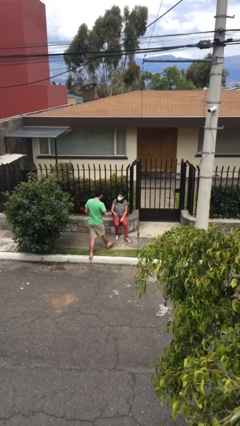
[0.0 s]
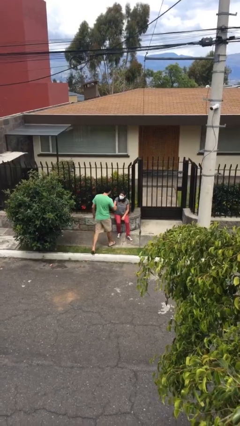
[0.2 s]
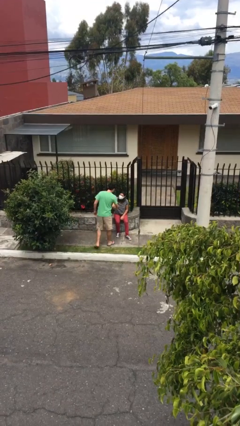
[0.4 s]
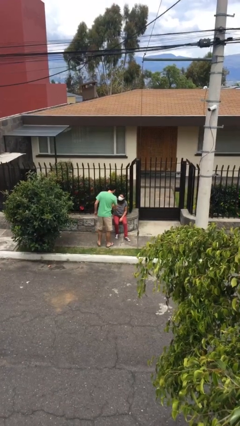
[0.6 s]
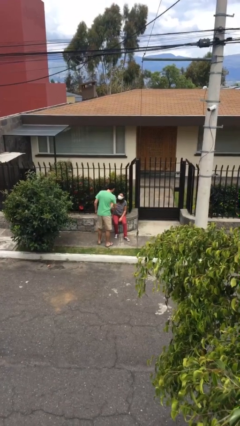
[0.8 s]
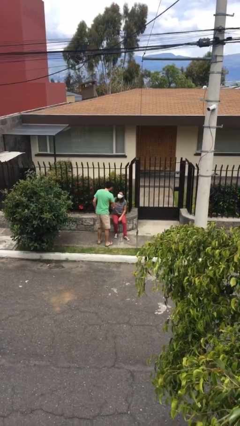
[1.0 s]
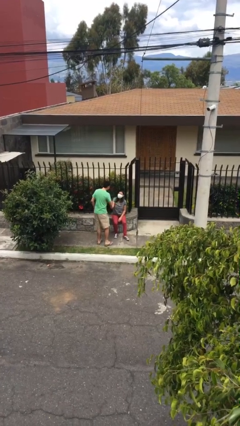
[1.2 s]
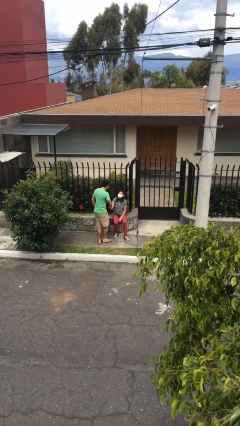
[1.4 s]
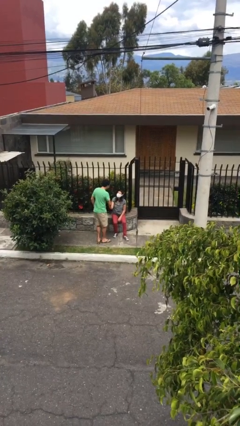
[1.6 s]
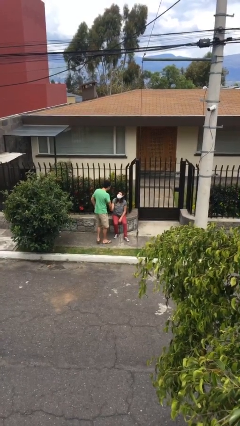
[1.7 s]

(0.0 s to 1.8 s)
person shakes hand

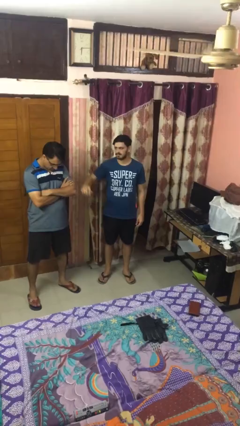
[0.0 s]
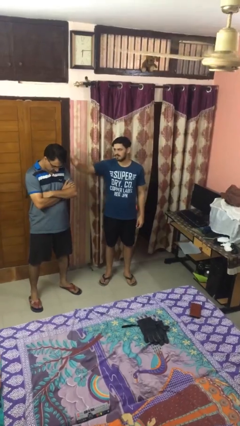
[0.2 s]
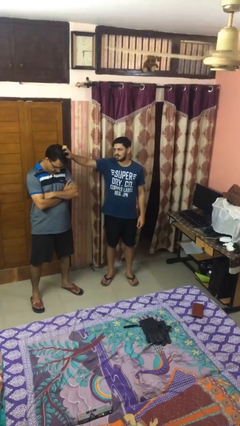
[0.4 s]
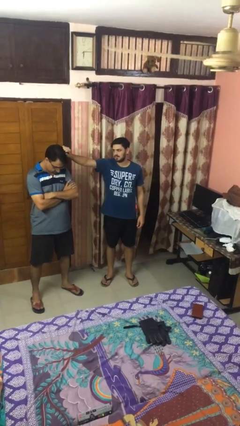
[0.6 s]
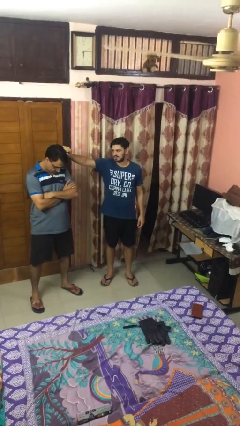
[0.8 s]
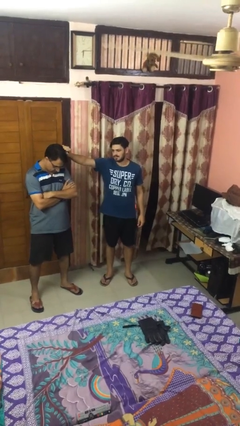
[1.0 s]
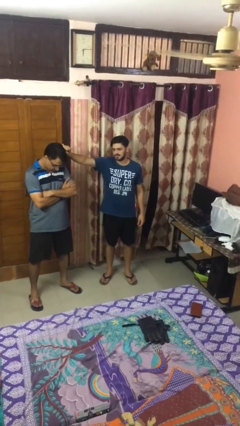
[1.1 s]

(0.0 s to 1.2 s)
person grabs person by hair

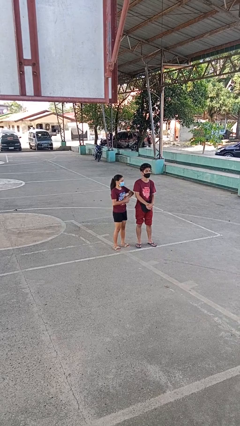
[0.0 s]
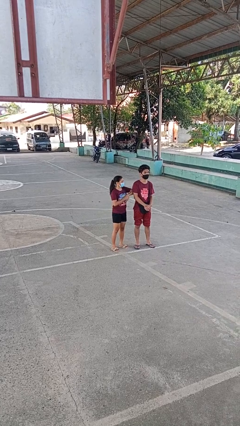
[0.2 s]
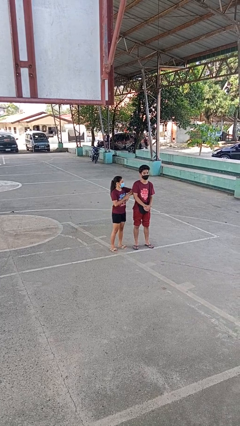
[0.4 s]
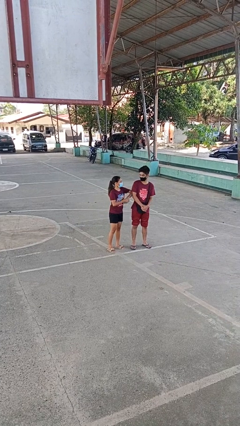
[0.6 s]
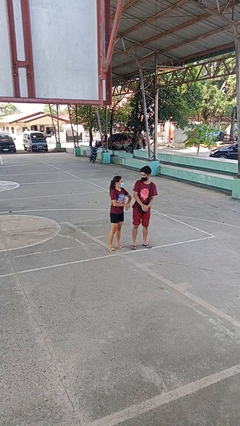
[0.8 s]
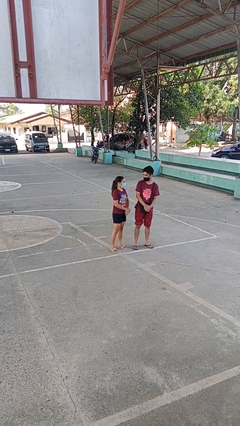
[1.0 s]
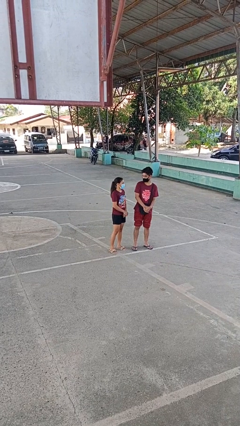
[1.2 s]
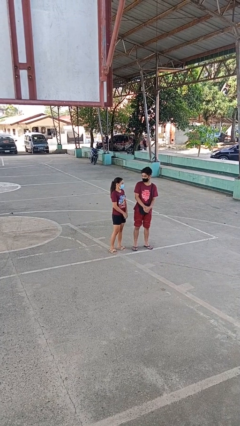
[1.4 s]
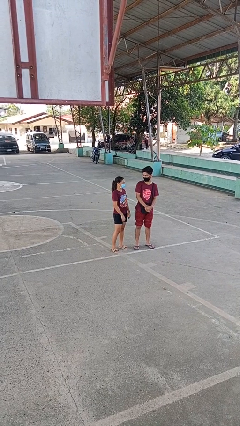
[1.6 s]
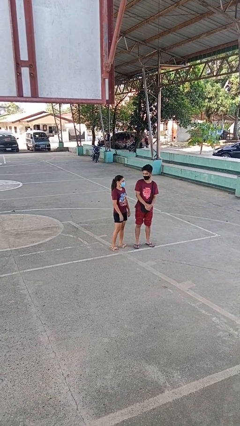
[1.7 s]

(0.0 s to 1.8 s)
person nudges person with elbow

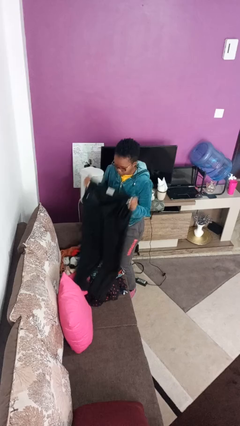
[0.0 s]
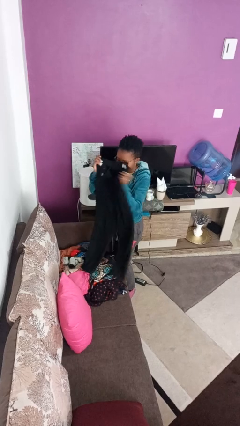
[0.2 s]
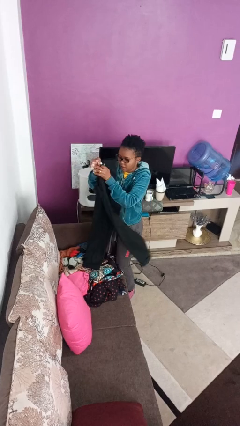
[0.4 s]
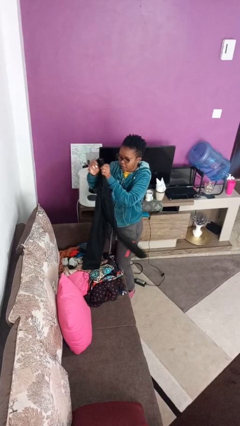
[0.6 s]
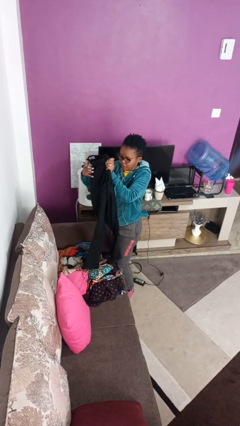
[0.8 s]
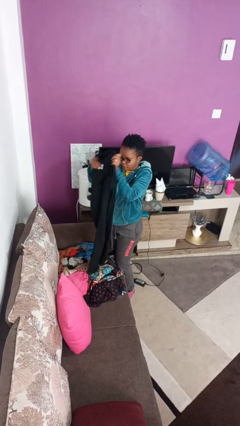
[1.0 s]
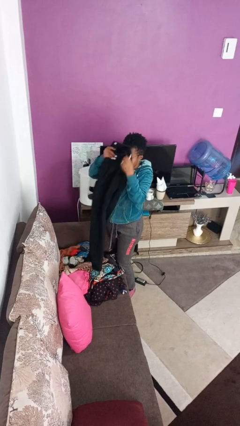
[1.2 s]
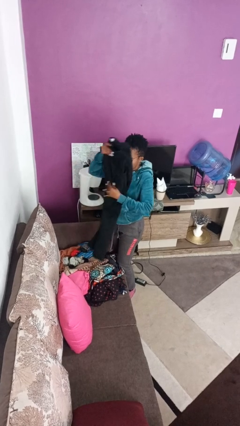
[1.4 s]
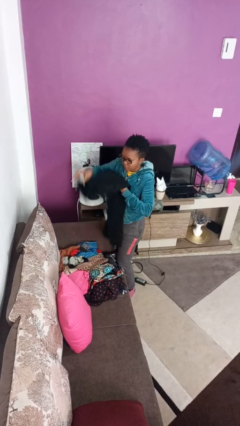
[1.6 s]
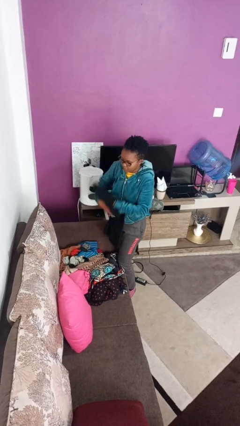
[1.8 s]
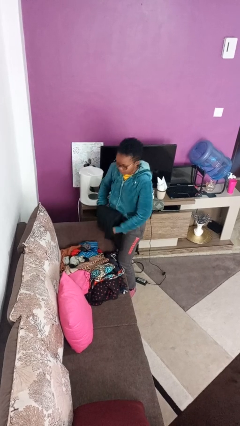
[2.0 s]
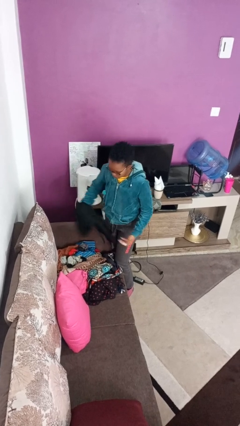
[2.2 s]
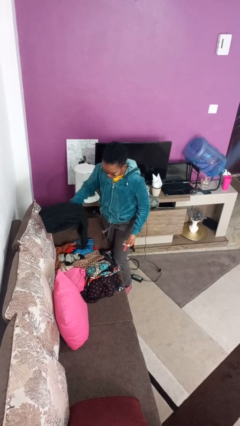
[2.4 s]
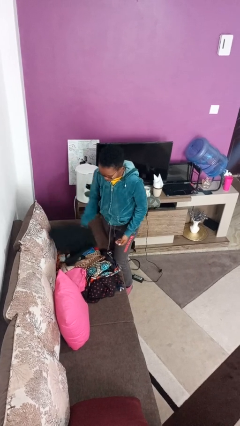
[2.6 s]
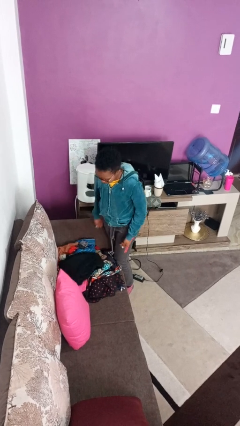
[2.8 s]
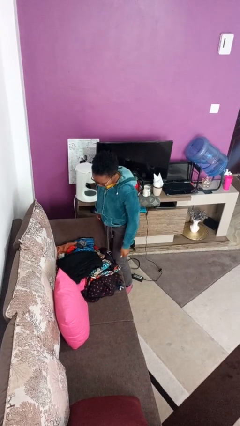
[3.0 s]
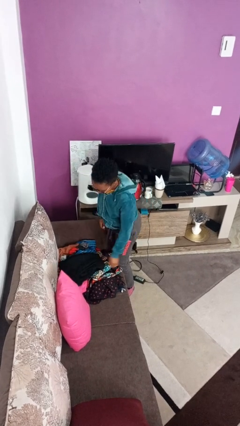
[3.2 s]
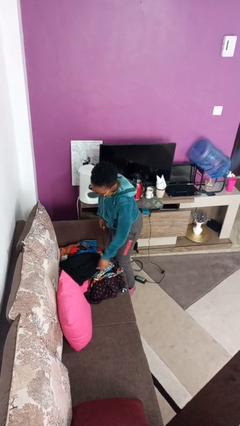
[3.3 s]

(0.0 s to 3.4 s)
person folds pants

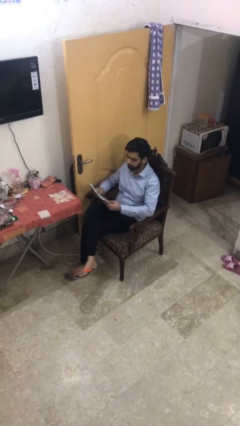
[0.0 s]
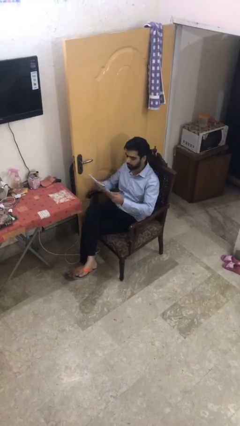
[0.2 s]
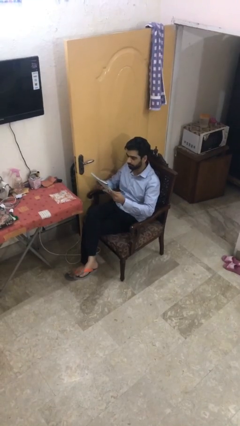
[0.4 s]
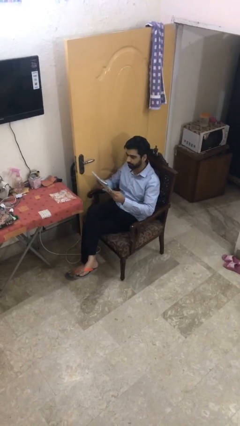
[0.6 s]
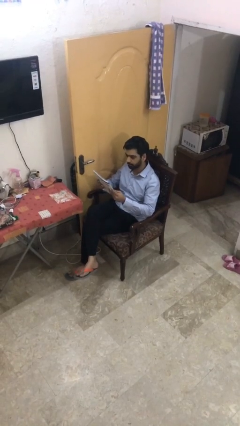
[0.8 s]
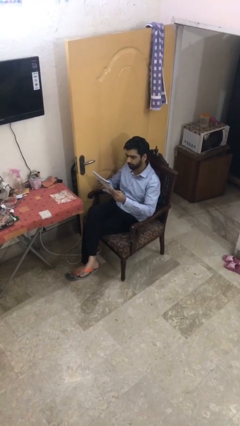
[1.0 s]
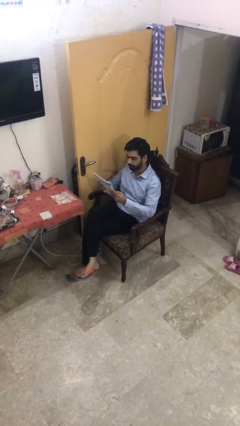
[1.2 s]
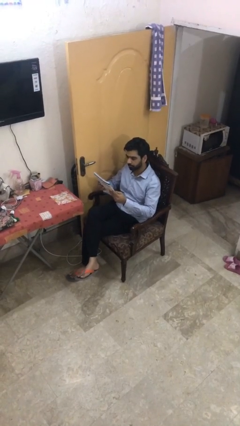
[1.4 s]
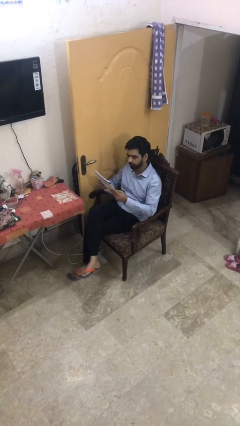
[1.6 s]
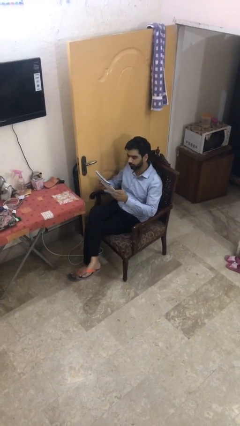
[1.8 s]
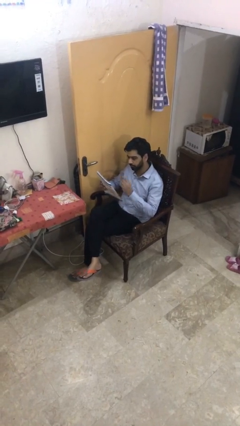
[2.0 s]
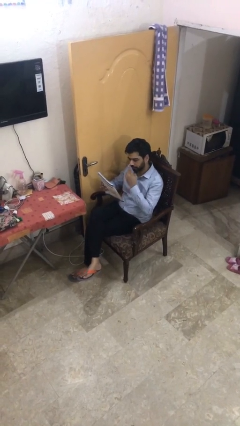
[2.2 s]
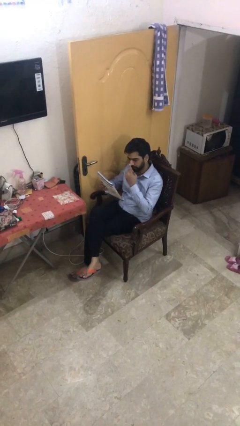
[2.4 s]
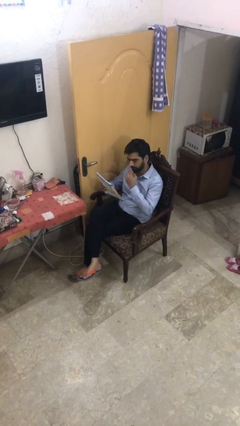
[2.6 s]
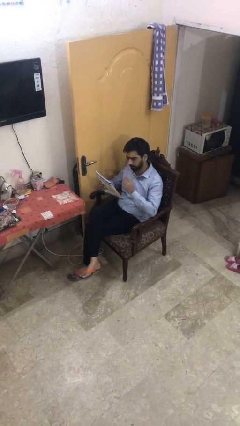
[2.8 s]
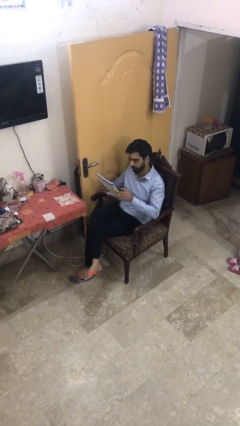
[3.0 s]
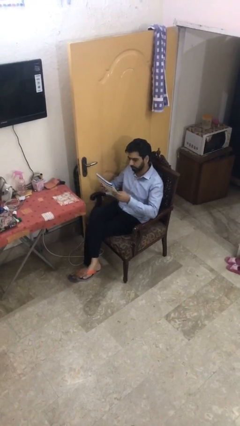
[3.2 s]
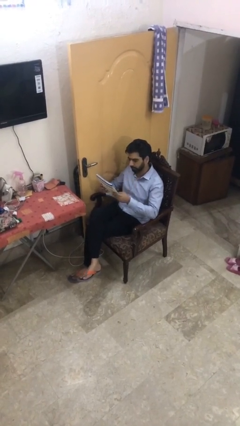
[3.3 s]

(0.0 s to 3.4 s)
person reads document

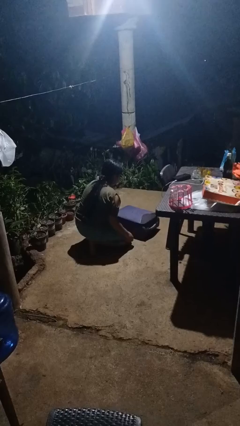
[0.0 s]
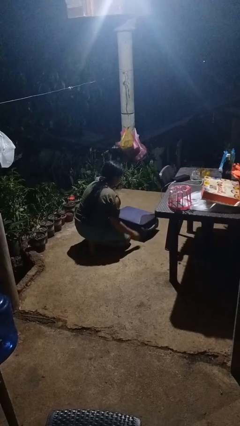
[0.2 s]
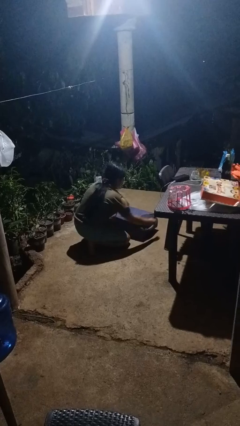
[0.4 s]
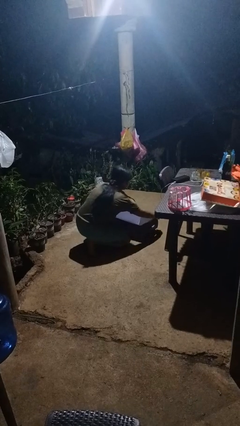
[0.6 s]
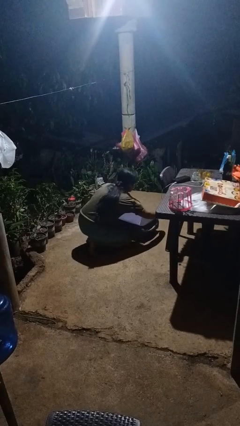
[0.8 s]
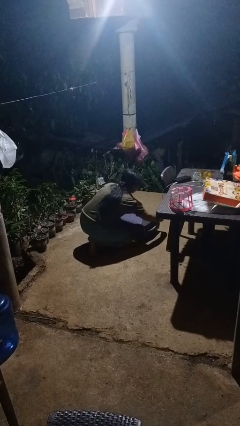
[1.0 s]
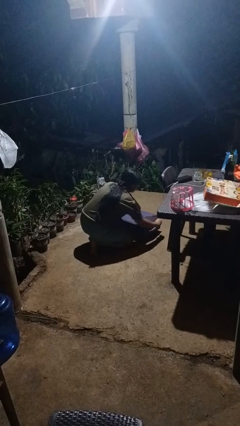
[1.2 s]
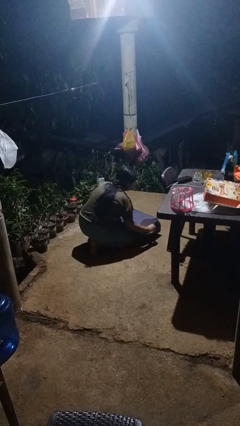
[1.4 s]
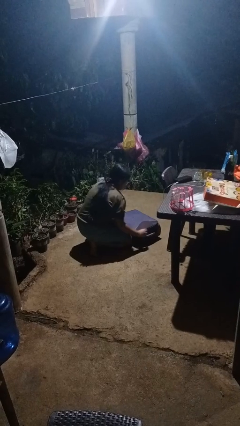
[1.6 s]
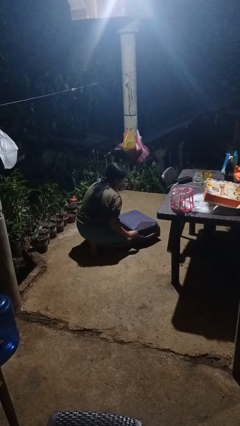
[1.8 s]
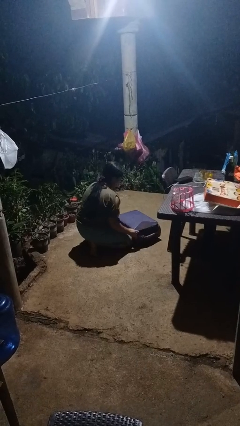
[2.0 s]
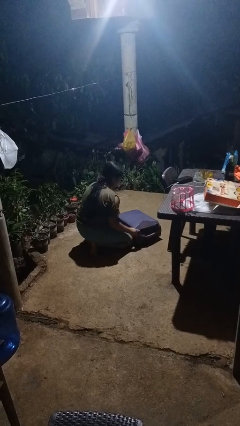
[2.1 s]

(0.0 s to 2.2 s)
person closes suitcase

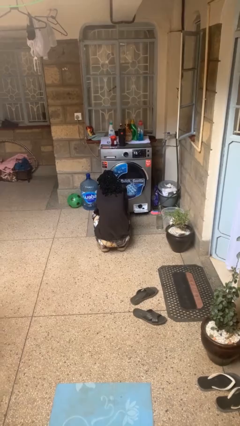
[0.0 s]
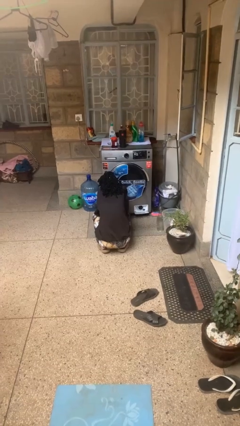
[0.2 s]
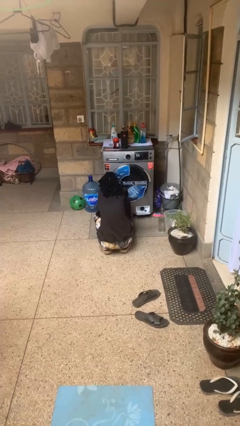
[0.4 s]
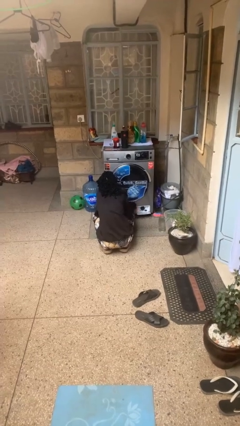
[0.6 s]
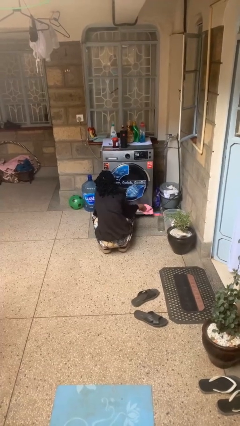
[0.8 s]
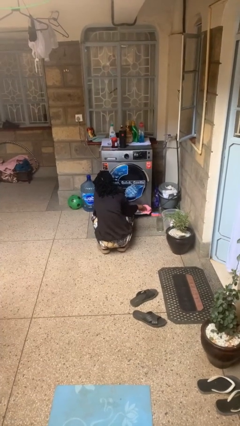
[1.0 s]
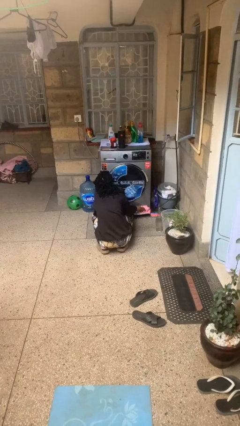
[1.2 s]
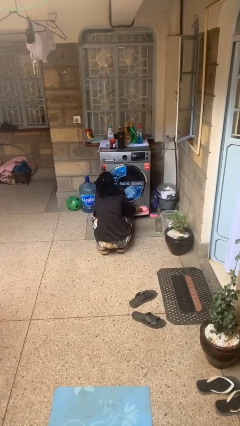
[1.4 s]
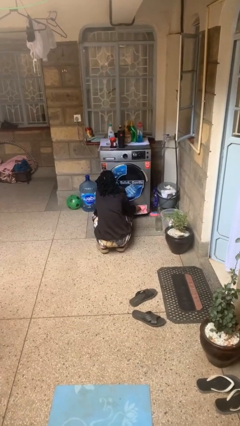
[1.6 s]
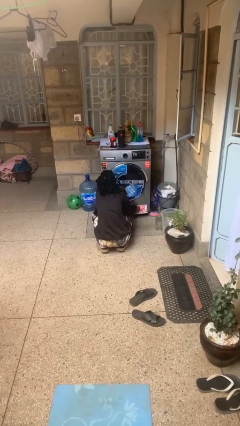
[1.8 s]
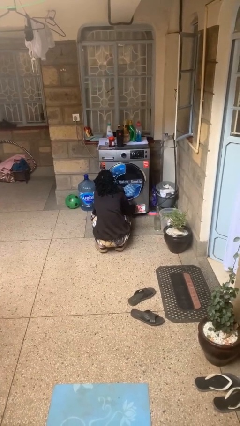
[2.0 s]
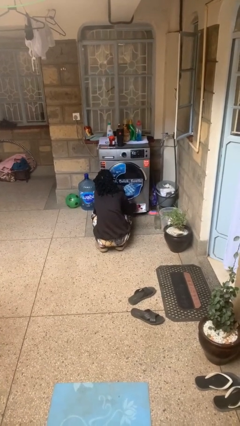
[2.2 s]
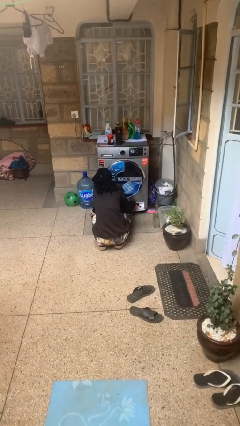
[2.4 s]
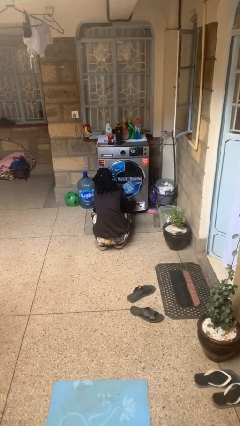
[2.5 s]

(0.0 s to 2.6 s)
person cleans dryer lint trap

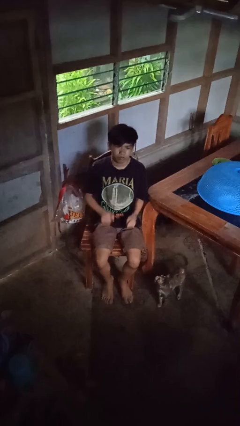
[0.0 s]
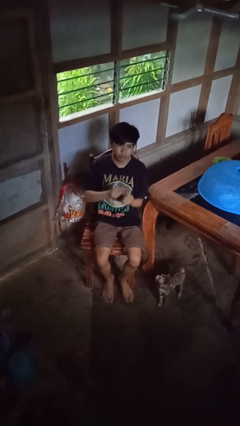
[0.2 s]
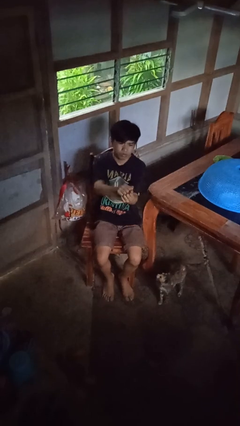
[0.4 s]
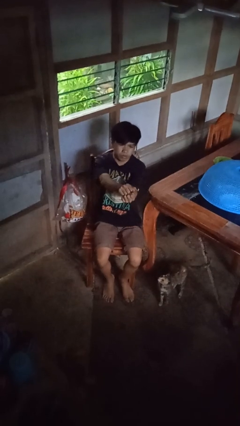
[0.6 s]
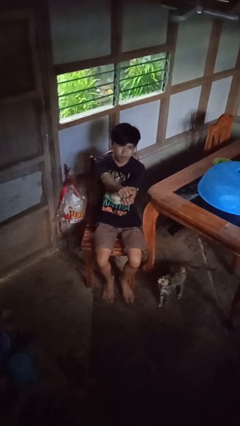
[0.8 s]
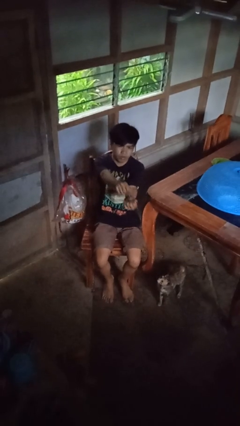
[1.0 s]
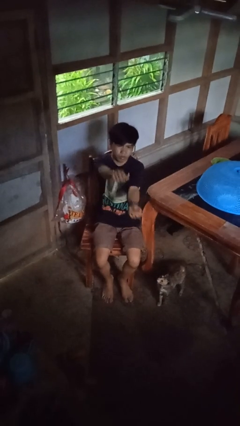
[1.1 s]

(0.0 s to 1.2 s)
person gestures zoom out
